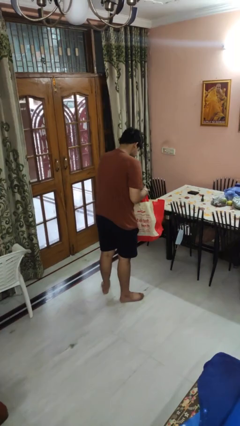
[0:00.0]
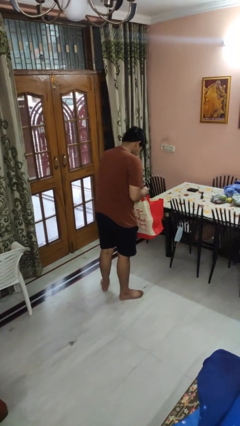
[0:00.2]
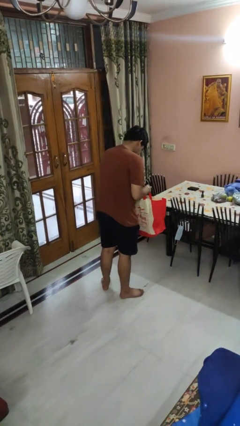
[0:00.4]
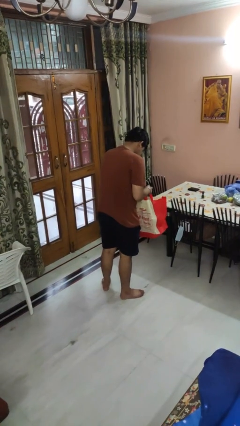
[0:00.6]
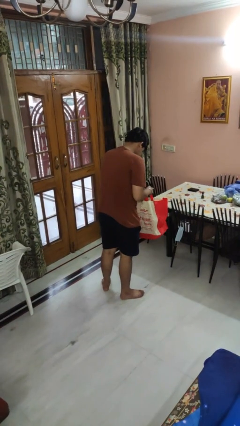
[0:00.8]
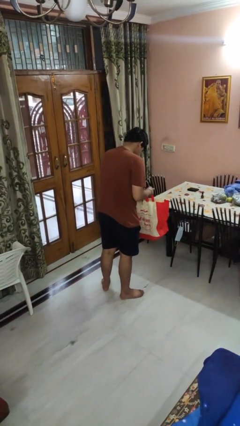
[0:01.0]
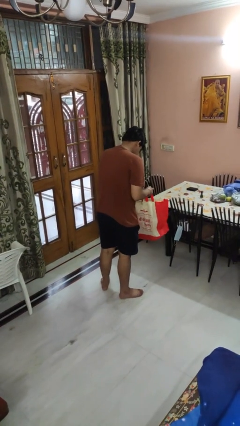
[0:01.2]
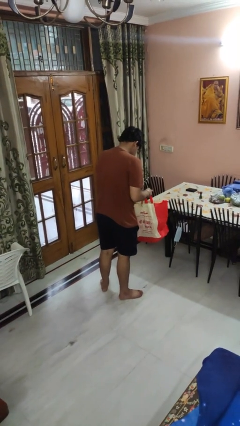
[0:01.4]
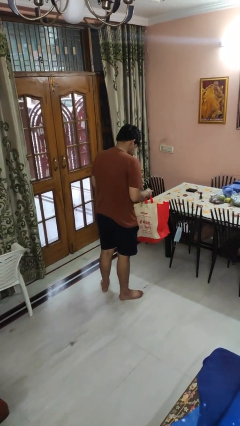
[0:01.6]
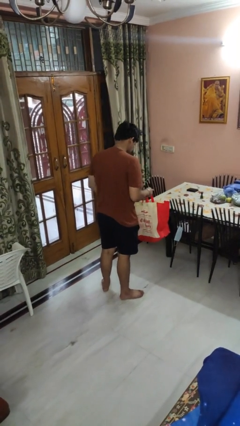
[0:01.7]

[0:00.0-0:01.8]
person searches in bag

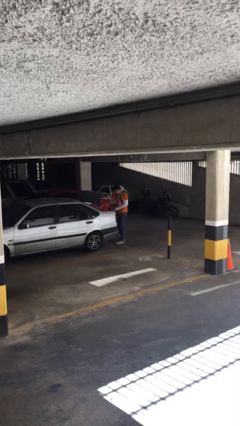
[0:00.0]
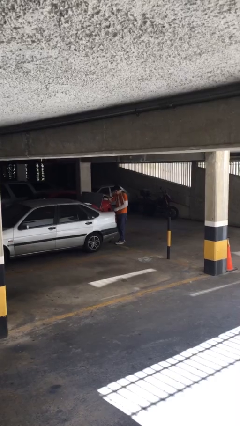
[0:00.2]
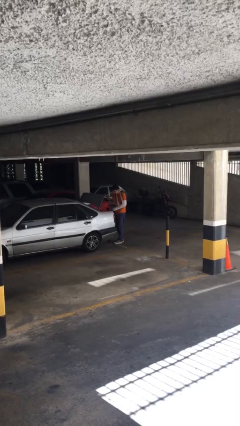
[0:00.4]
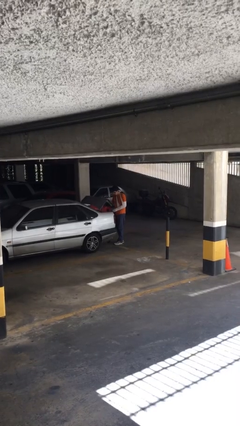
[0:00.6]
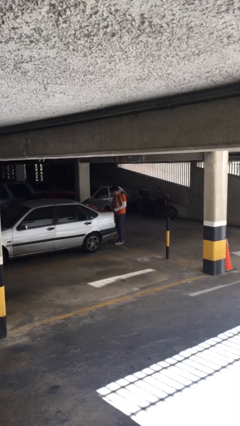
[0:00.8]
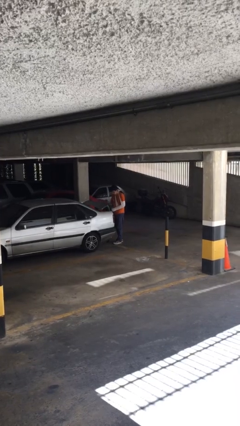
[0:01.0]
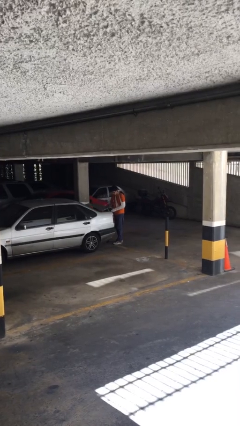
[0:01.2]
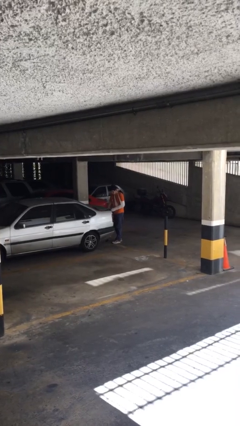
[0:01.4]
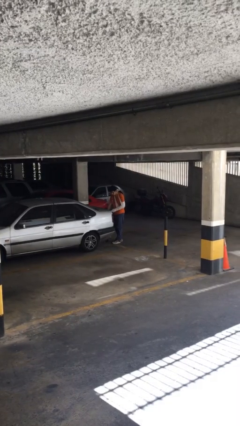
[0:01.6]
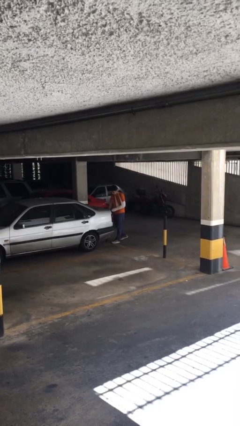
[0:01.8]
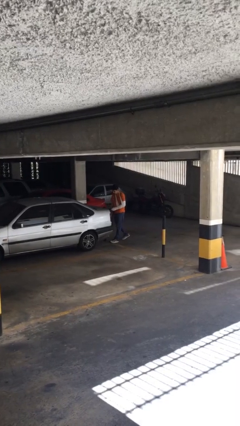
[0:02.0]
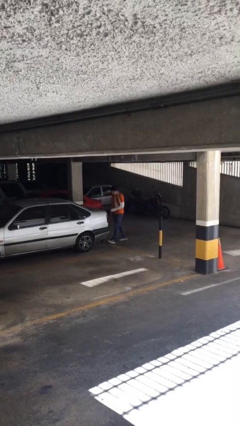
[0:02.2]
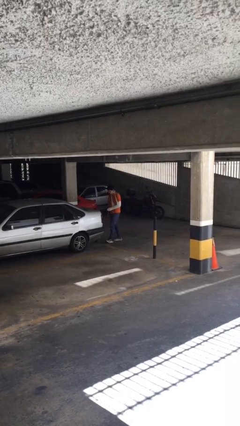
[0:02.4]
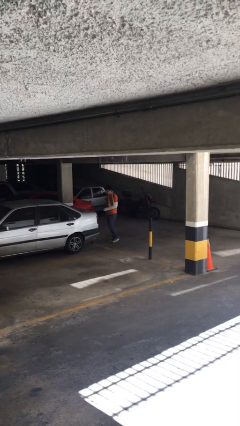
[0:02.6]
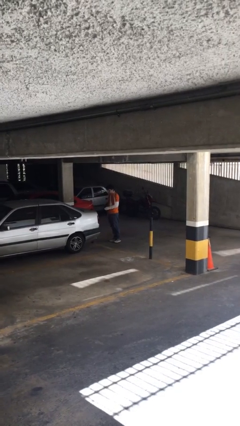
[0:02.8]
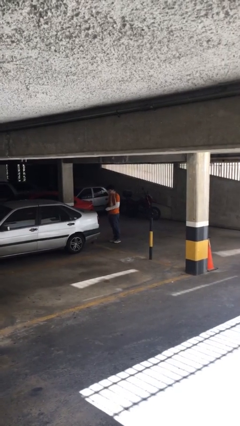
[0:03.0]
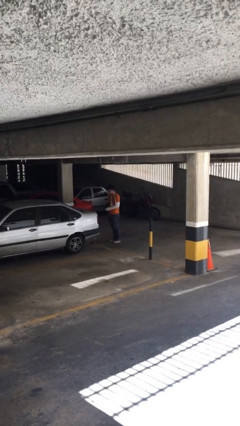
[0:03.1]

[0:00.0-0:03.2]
person closes car trunk

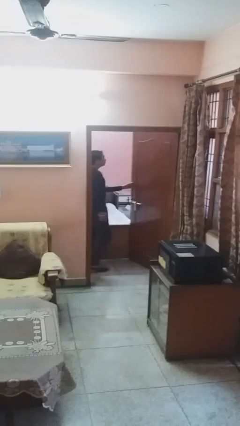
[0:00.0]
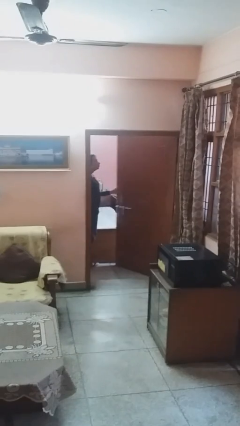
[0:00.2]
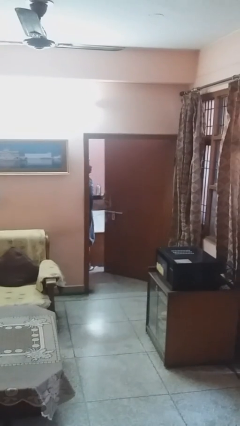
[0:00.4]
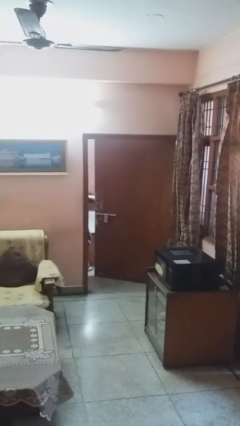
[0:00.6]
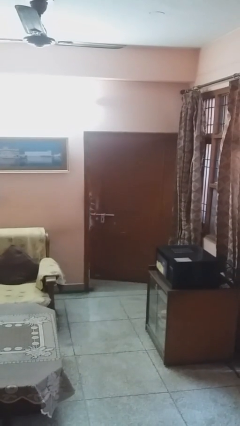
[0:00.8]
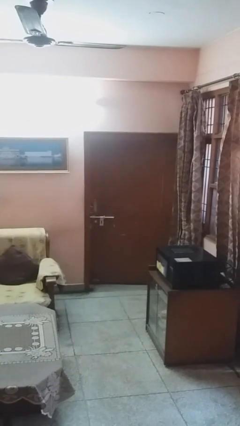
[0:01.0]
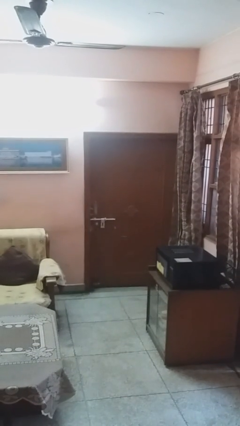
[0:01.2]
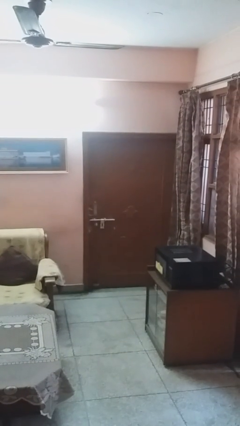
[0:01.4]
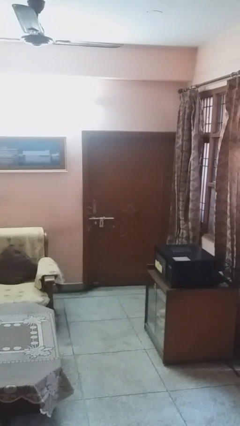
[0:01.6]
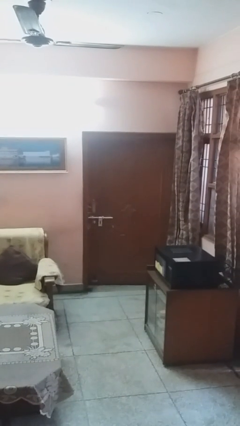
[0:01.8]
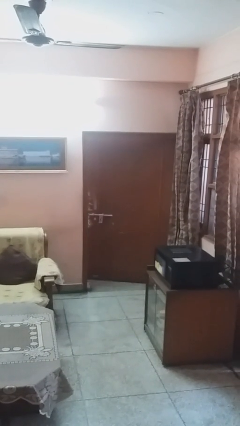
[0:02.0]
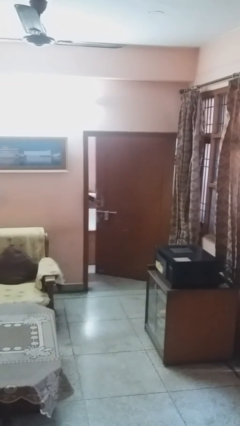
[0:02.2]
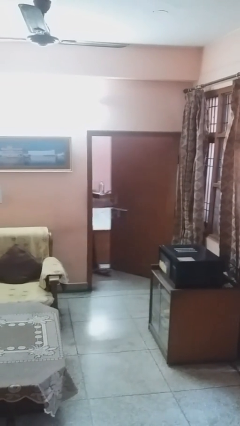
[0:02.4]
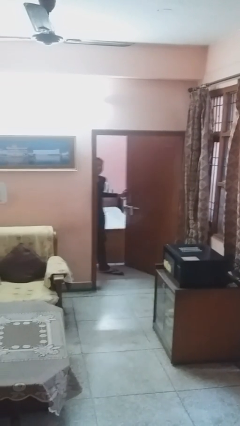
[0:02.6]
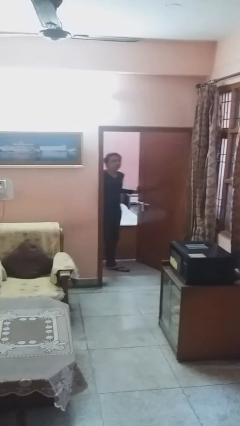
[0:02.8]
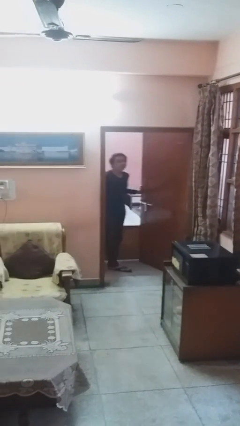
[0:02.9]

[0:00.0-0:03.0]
person closes facility door

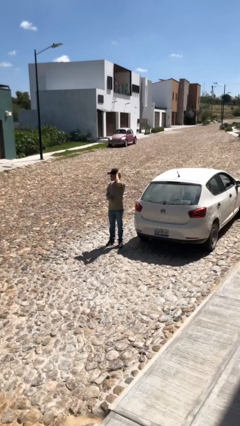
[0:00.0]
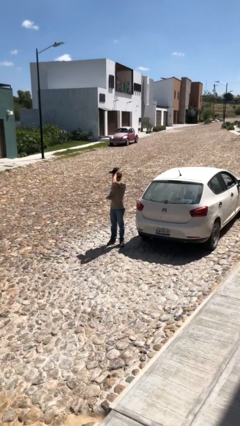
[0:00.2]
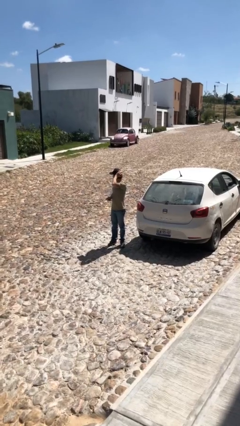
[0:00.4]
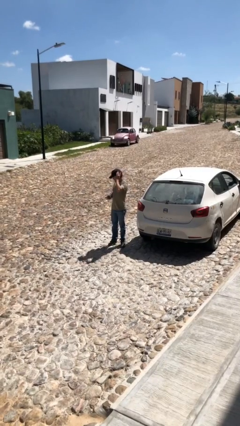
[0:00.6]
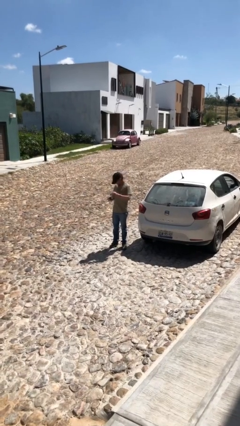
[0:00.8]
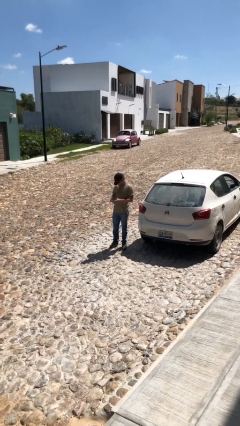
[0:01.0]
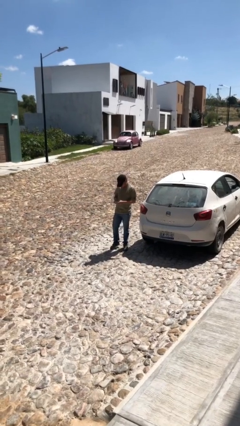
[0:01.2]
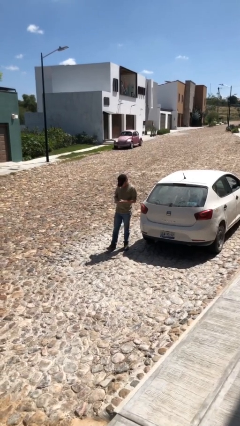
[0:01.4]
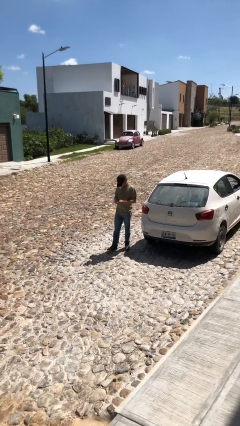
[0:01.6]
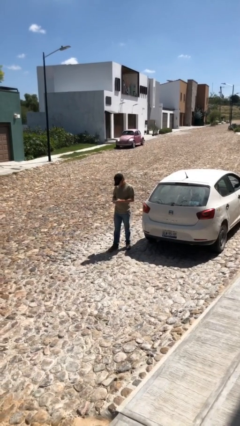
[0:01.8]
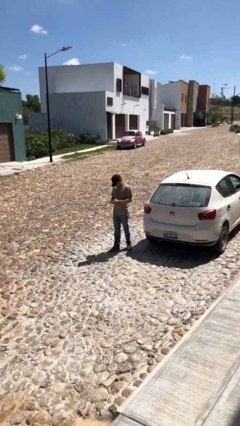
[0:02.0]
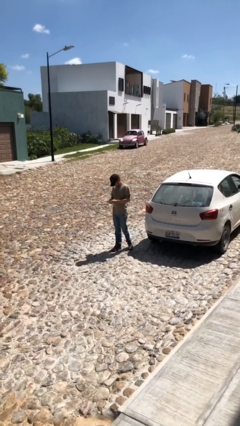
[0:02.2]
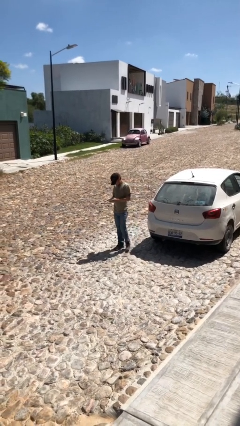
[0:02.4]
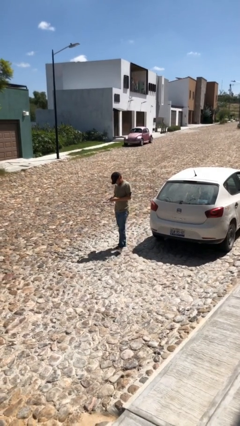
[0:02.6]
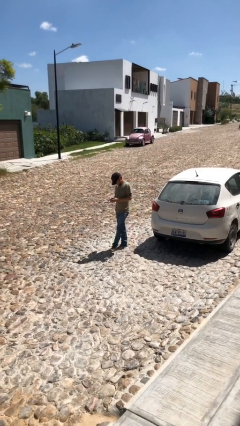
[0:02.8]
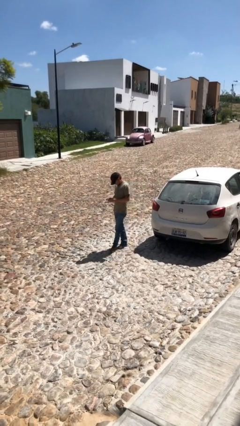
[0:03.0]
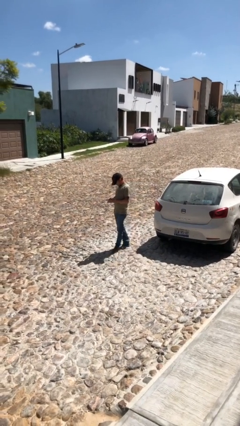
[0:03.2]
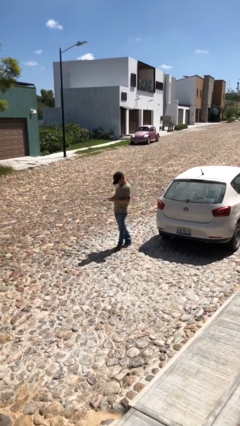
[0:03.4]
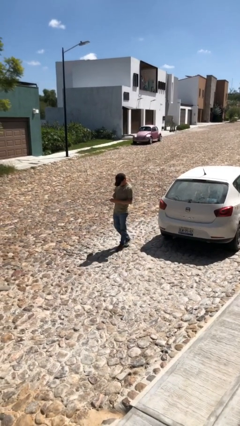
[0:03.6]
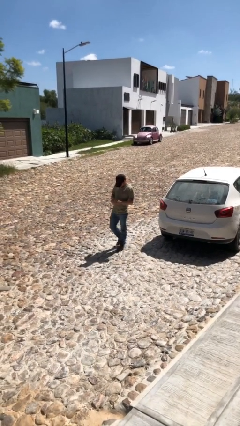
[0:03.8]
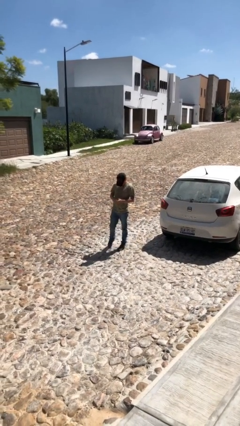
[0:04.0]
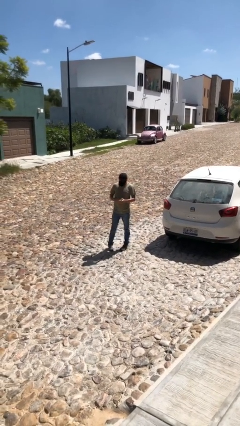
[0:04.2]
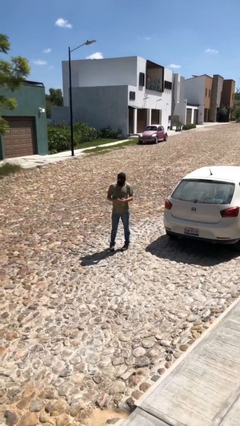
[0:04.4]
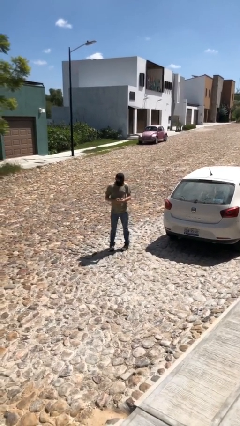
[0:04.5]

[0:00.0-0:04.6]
person texts on phone

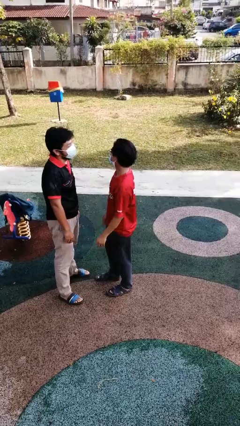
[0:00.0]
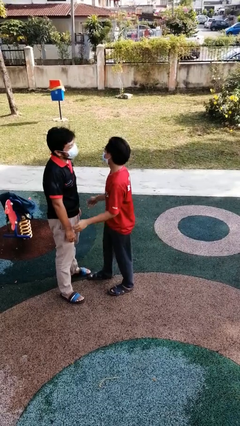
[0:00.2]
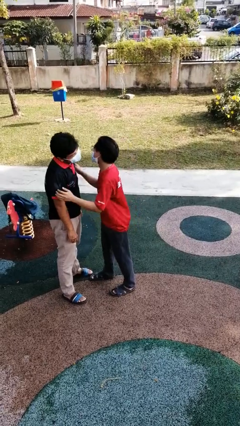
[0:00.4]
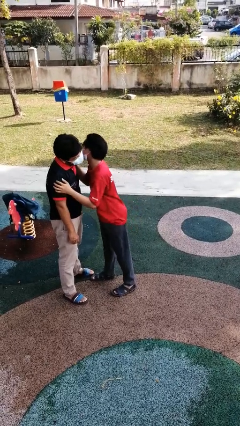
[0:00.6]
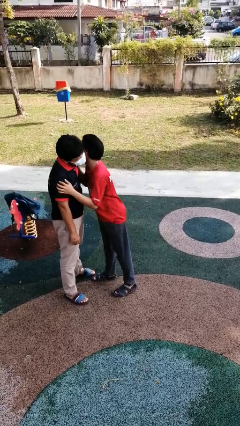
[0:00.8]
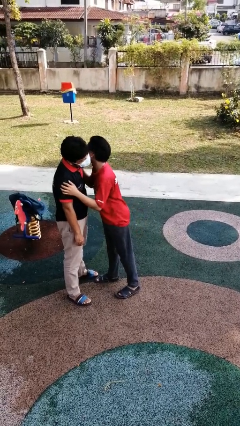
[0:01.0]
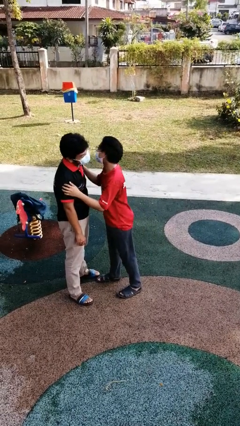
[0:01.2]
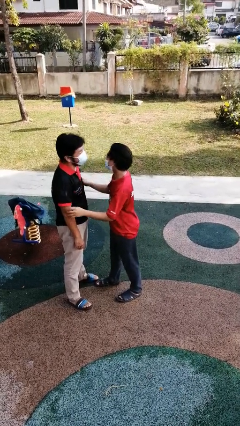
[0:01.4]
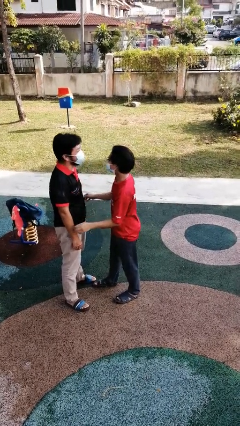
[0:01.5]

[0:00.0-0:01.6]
person kisses cheek of person

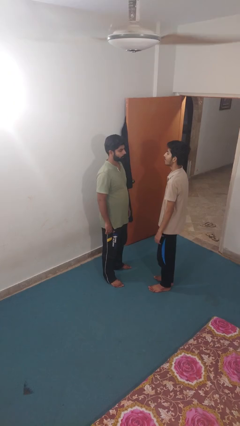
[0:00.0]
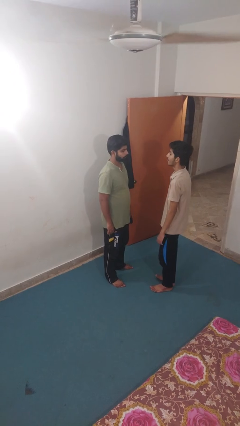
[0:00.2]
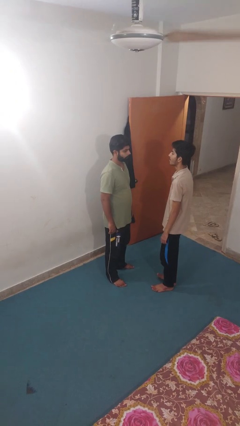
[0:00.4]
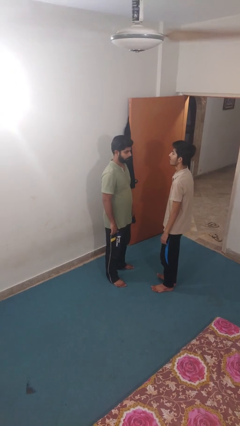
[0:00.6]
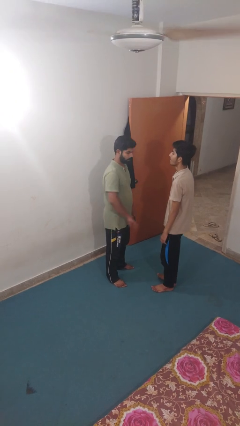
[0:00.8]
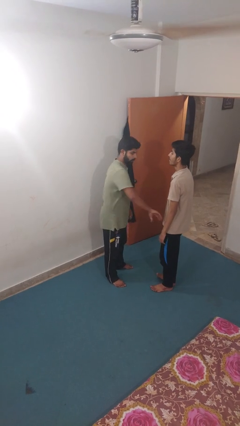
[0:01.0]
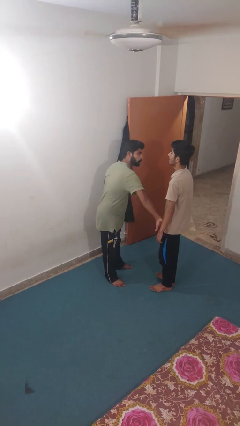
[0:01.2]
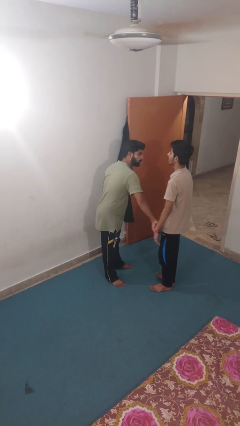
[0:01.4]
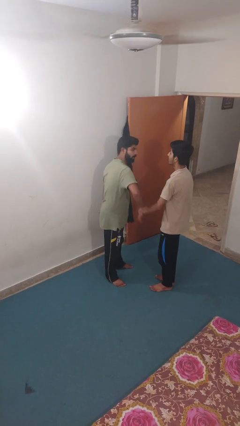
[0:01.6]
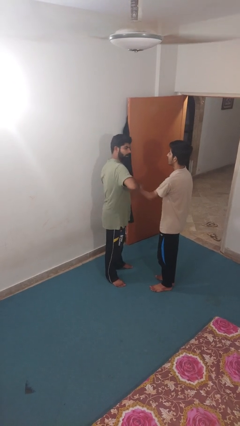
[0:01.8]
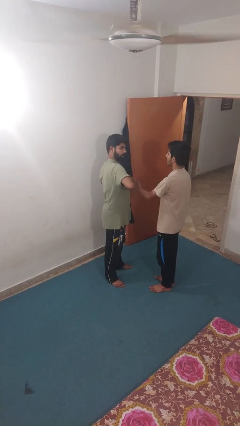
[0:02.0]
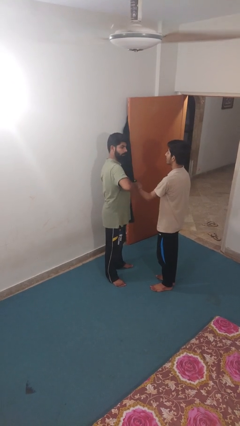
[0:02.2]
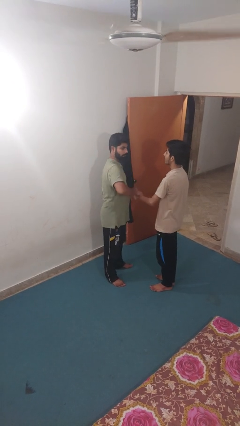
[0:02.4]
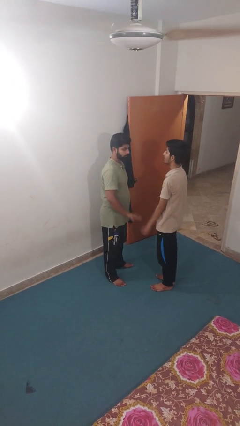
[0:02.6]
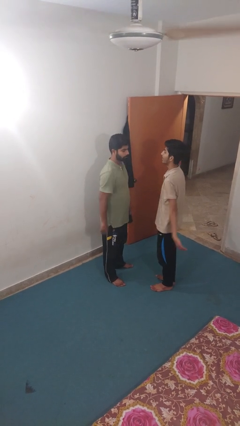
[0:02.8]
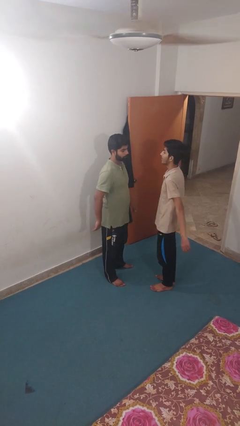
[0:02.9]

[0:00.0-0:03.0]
person grabs person by forearm
